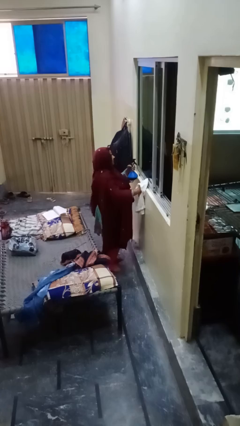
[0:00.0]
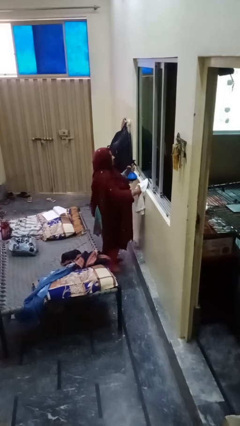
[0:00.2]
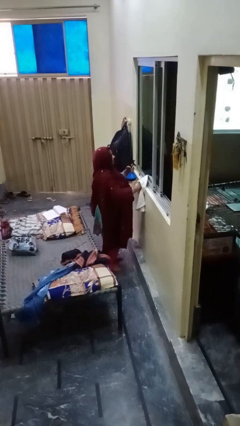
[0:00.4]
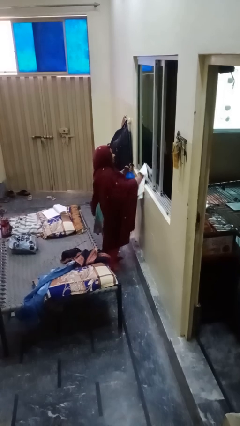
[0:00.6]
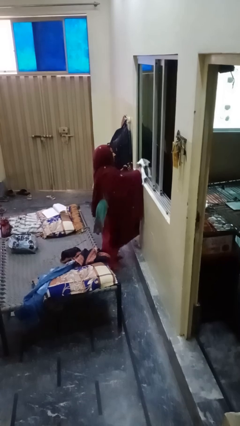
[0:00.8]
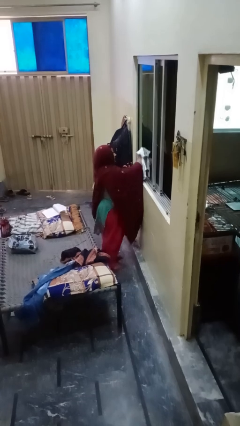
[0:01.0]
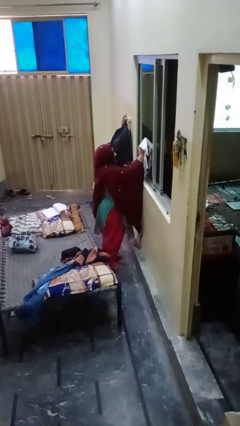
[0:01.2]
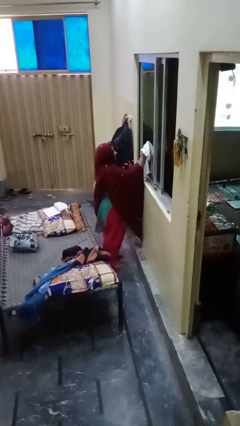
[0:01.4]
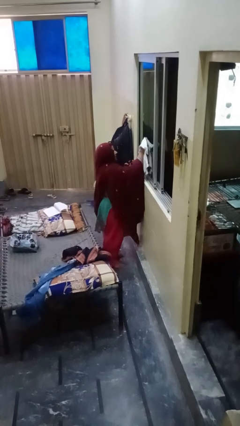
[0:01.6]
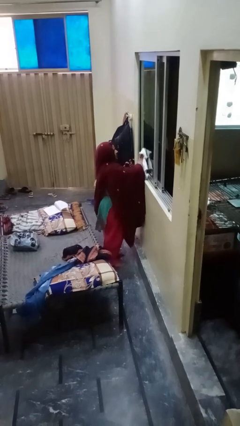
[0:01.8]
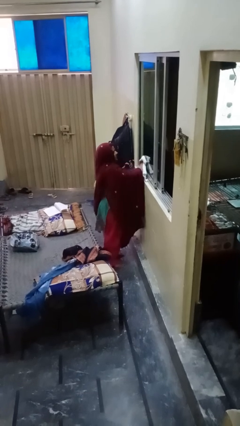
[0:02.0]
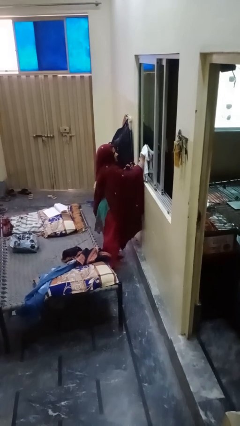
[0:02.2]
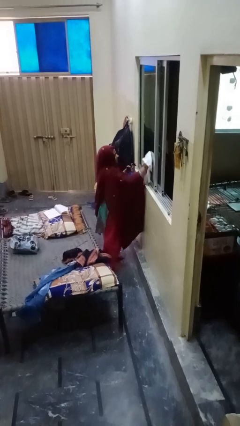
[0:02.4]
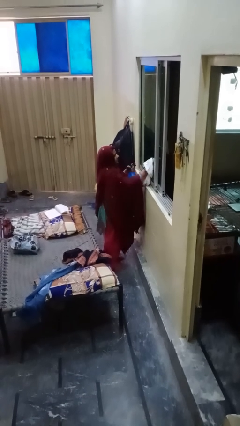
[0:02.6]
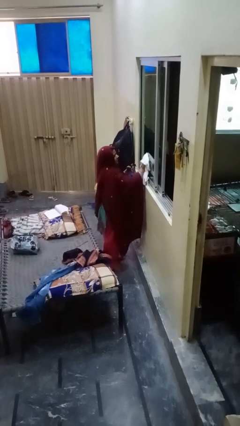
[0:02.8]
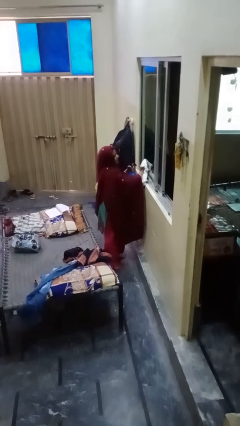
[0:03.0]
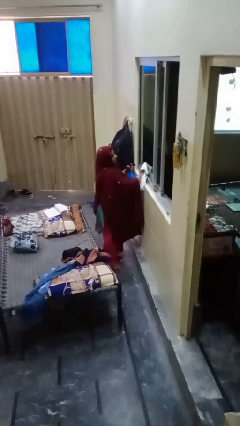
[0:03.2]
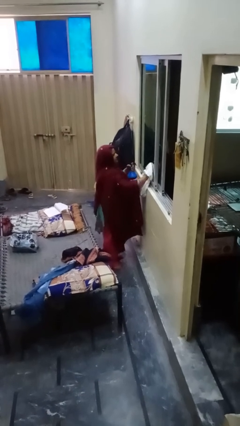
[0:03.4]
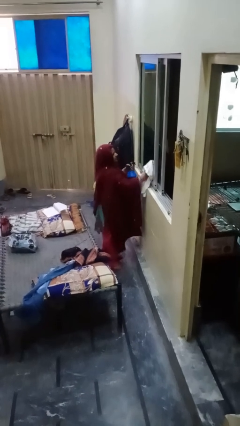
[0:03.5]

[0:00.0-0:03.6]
person washes window

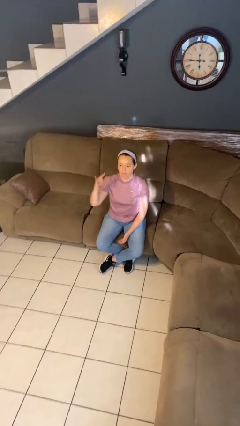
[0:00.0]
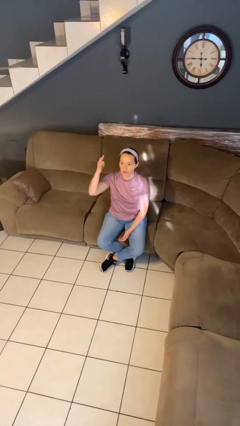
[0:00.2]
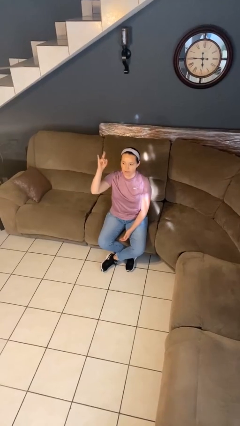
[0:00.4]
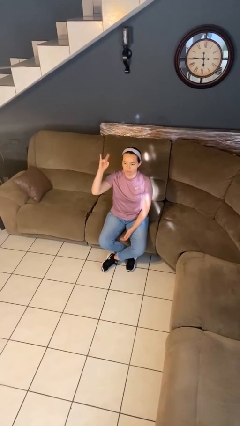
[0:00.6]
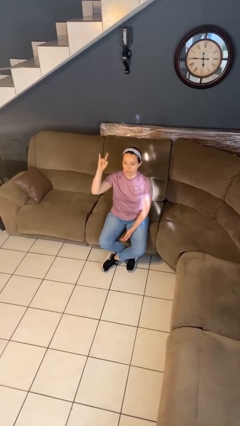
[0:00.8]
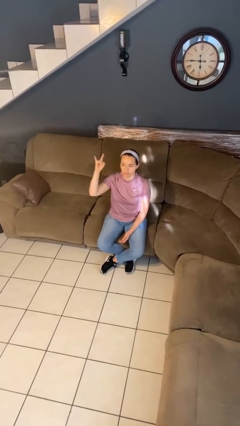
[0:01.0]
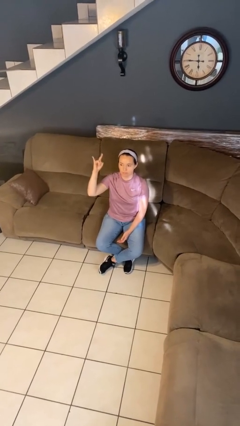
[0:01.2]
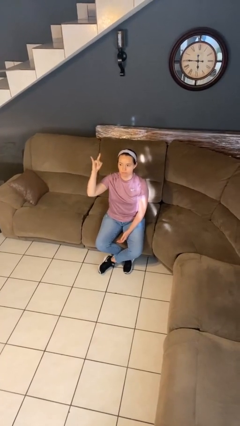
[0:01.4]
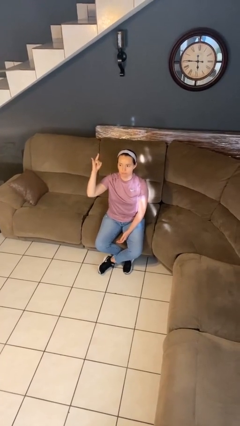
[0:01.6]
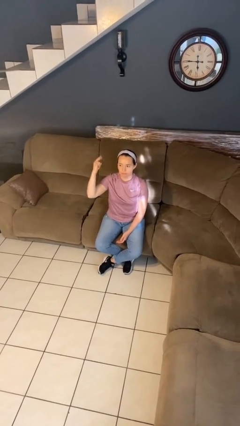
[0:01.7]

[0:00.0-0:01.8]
person gestures hang loose

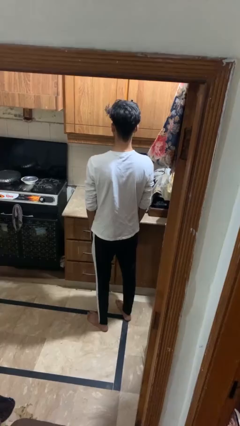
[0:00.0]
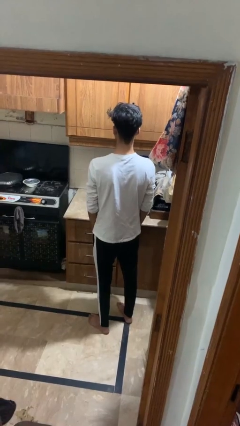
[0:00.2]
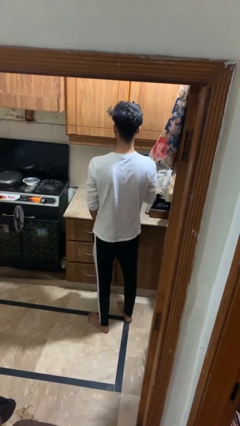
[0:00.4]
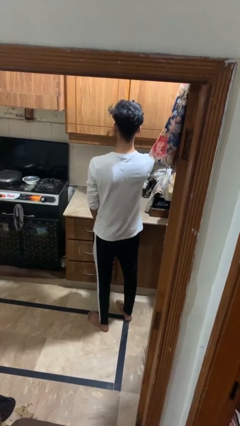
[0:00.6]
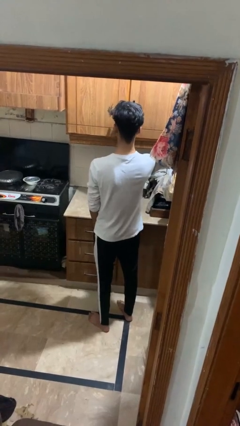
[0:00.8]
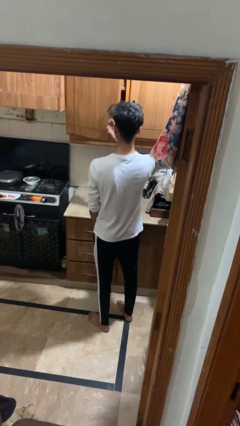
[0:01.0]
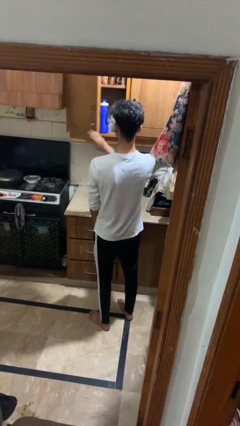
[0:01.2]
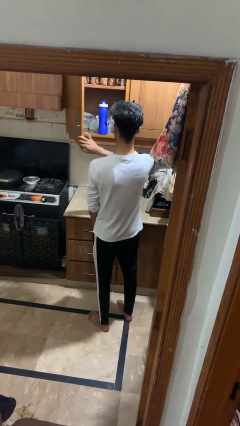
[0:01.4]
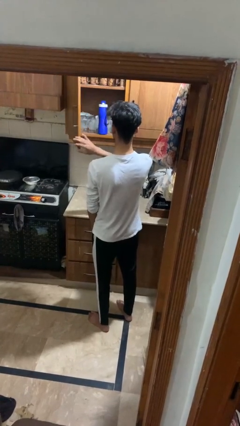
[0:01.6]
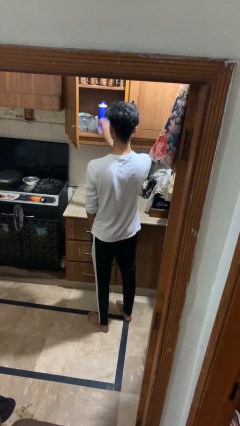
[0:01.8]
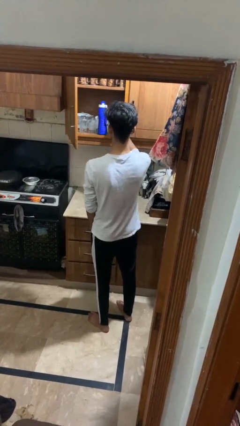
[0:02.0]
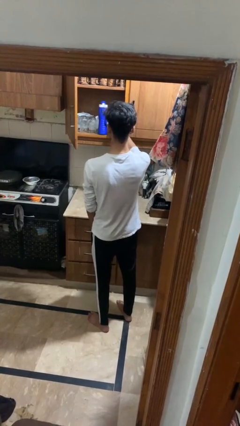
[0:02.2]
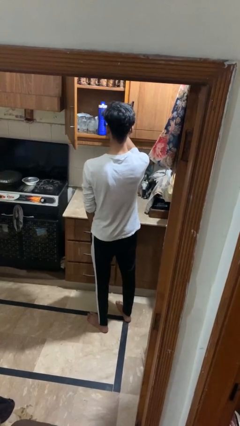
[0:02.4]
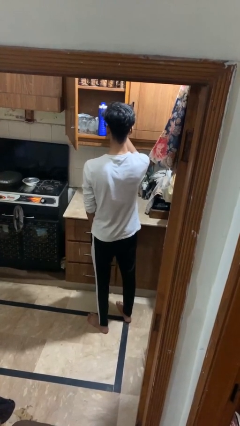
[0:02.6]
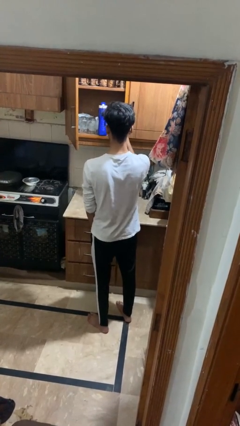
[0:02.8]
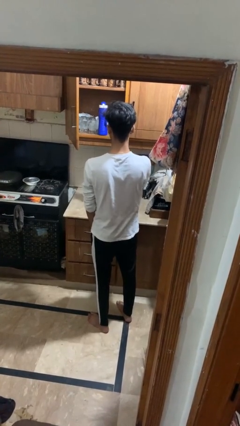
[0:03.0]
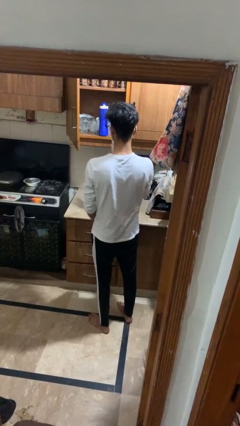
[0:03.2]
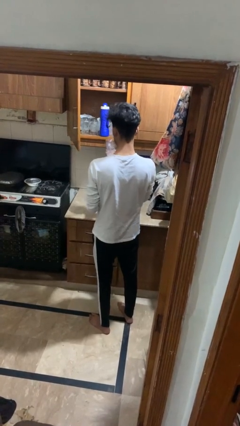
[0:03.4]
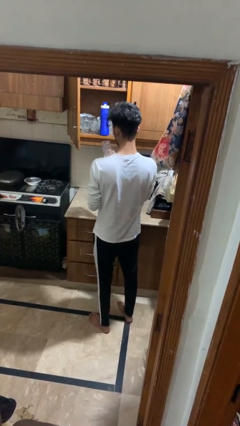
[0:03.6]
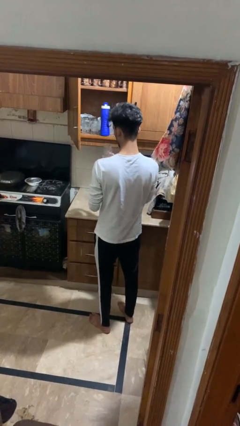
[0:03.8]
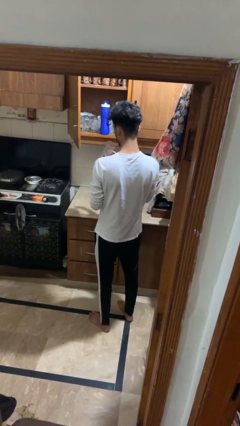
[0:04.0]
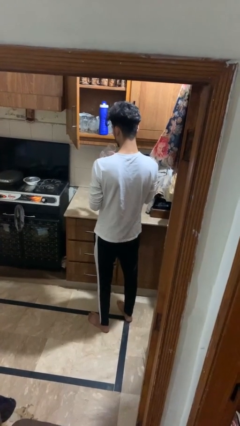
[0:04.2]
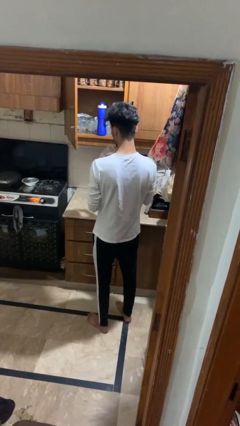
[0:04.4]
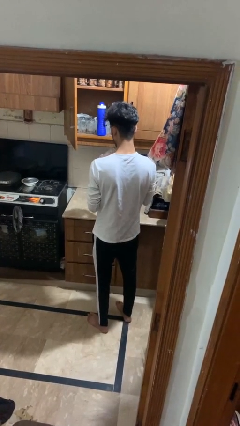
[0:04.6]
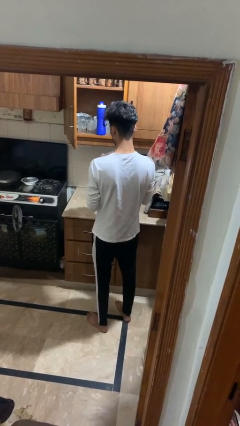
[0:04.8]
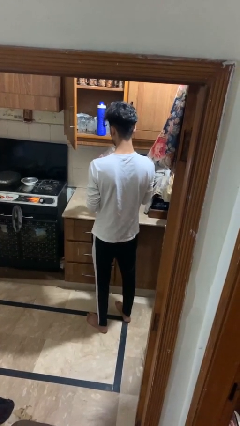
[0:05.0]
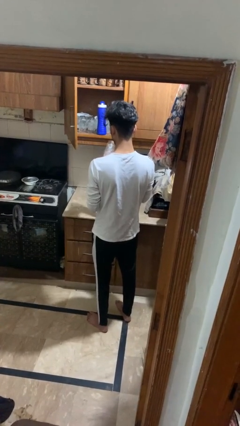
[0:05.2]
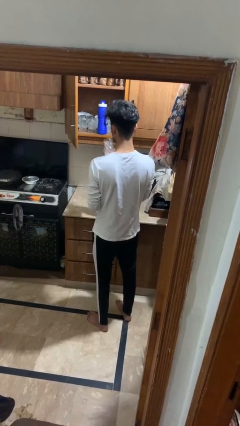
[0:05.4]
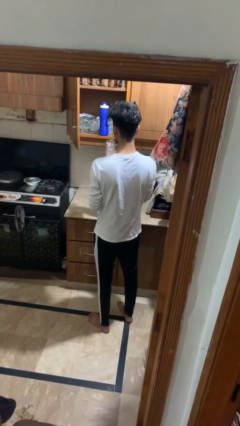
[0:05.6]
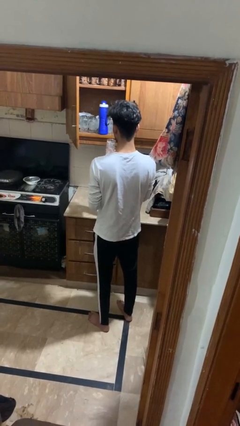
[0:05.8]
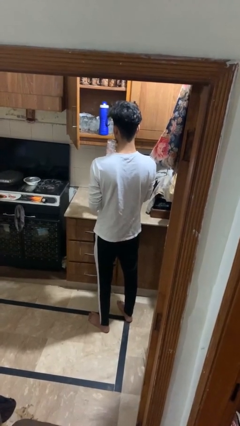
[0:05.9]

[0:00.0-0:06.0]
person puts object in cabinet

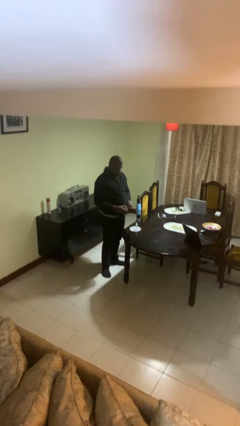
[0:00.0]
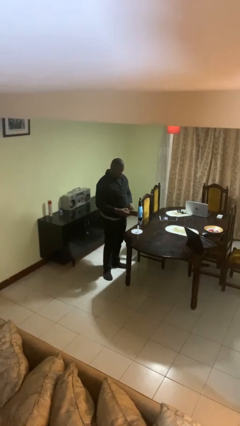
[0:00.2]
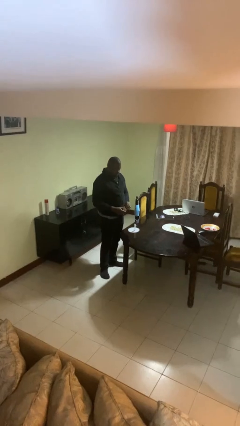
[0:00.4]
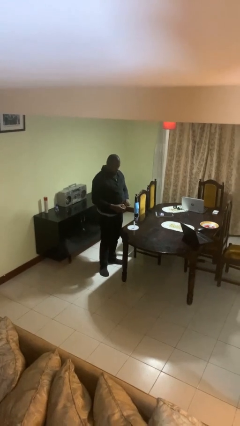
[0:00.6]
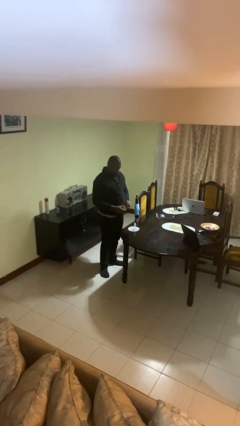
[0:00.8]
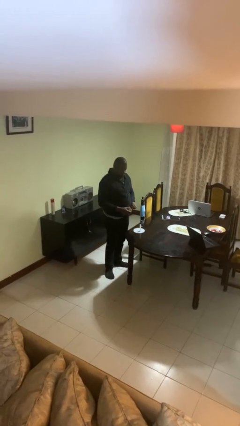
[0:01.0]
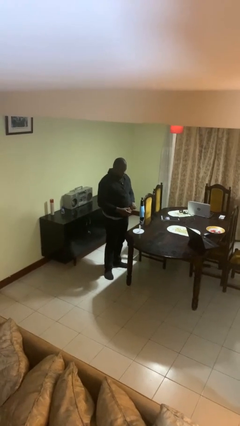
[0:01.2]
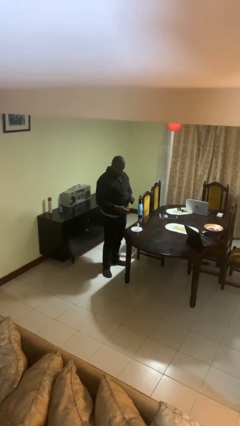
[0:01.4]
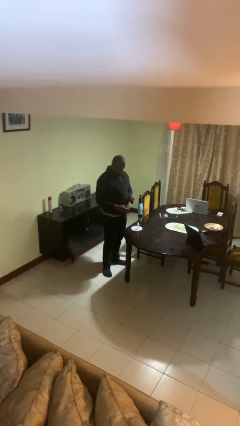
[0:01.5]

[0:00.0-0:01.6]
person lights candle

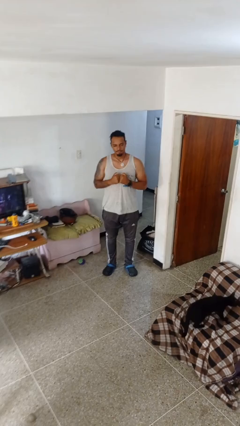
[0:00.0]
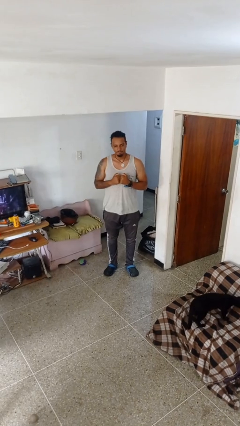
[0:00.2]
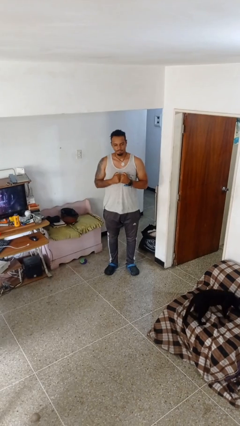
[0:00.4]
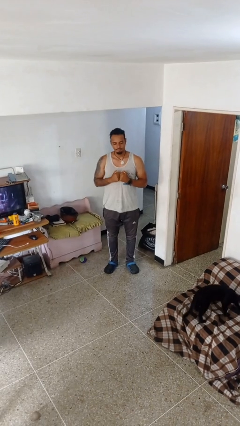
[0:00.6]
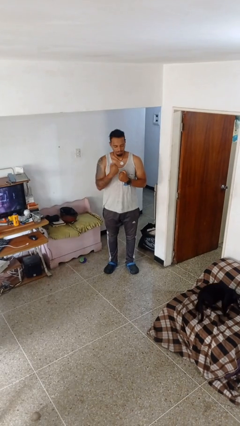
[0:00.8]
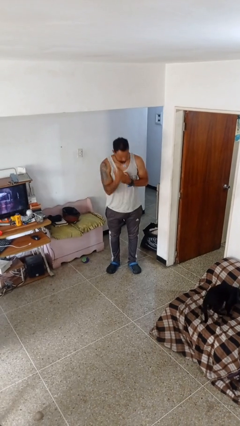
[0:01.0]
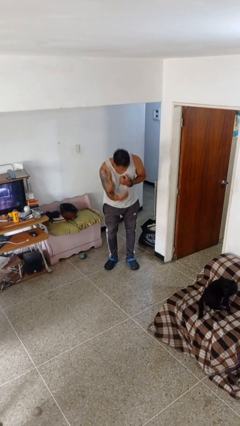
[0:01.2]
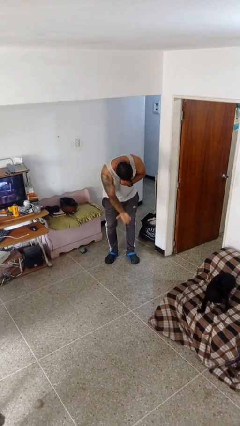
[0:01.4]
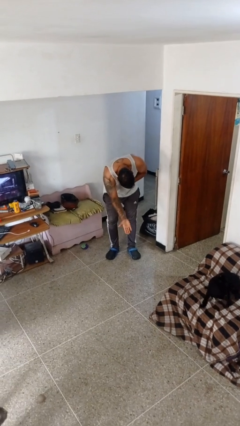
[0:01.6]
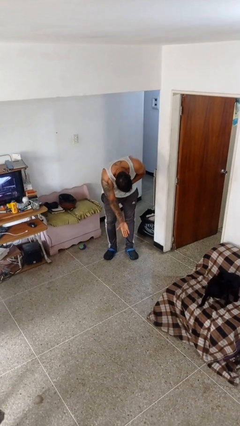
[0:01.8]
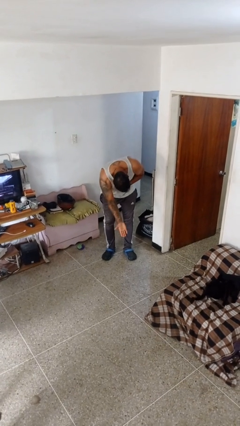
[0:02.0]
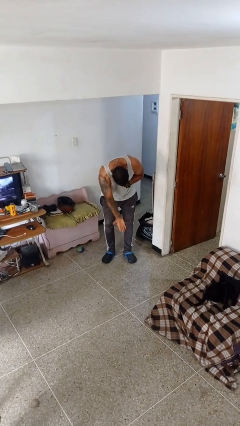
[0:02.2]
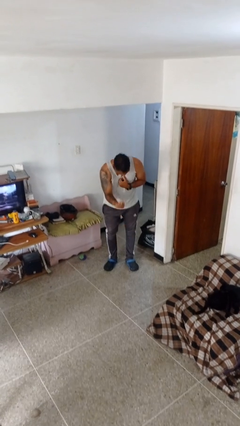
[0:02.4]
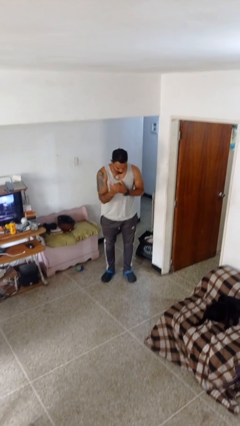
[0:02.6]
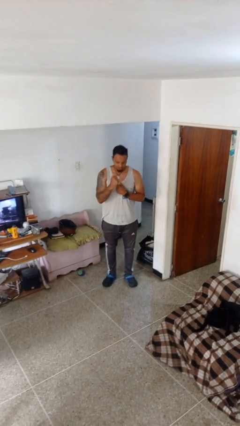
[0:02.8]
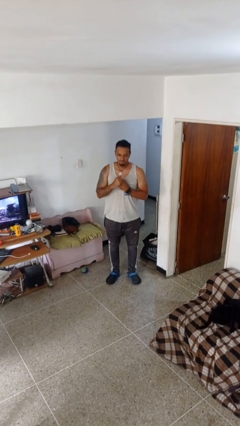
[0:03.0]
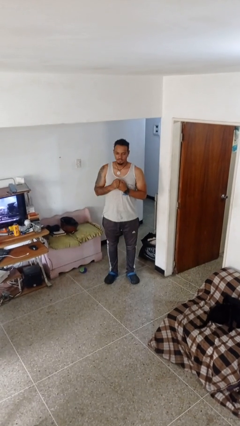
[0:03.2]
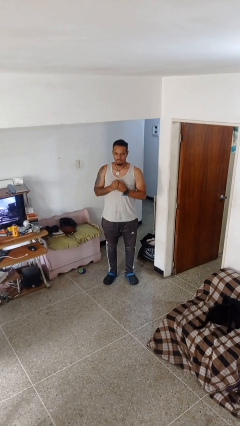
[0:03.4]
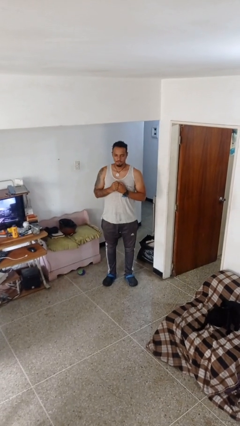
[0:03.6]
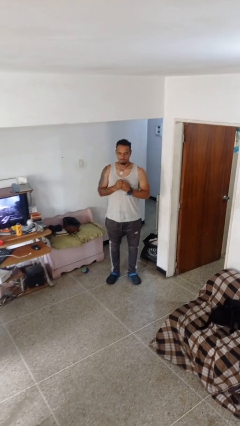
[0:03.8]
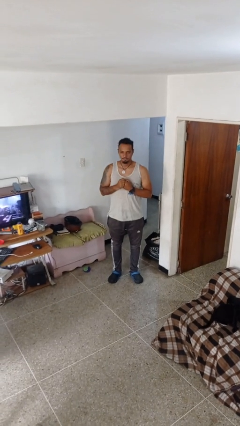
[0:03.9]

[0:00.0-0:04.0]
person bows

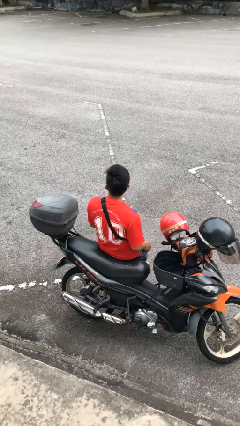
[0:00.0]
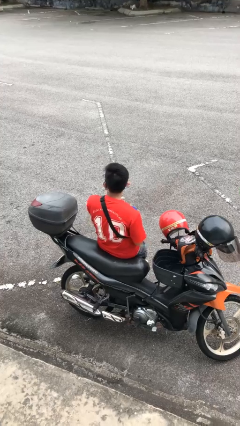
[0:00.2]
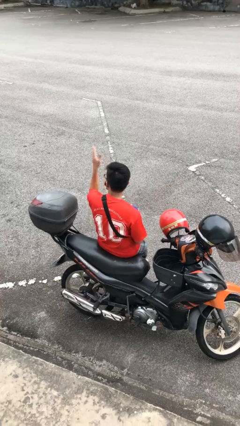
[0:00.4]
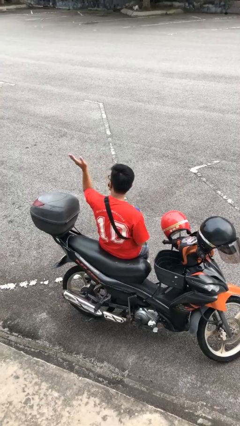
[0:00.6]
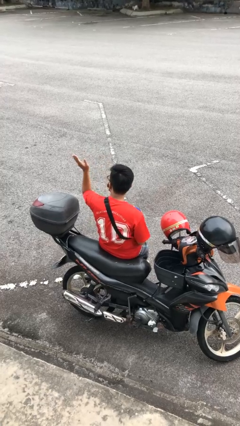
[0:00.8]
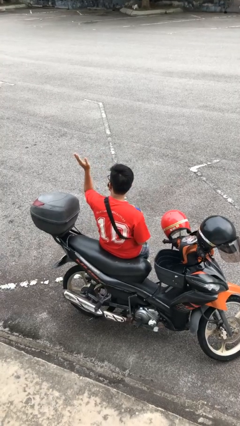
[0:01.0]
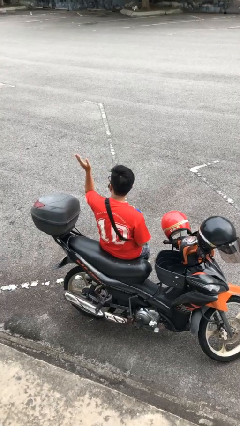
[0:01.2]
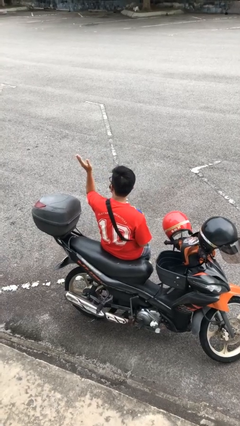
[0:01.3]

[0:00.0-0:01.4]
person gestures swipe left
